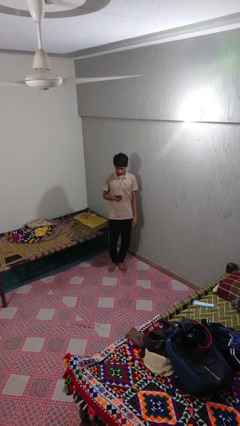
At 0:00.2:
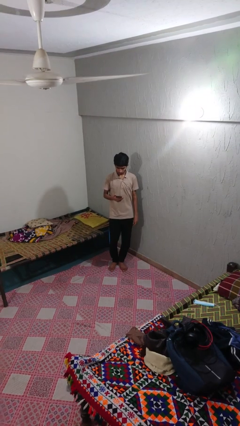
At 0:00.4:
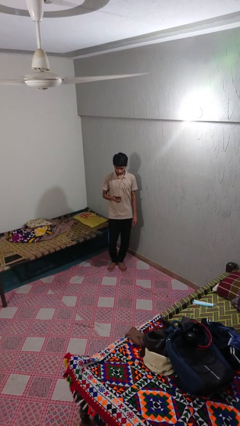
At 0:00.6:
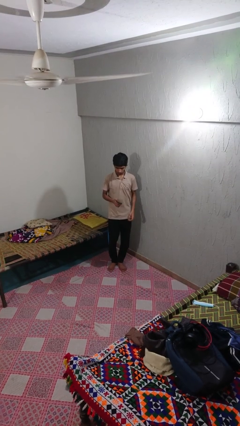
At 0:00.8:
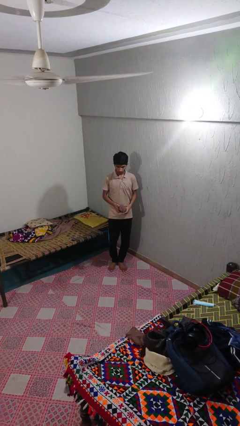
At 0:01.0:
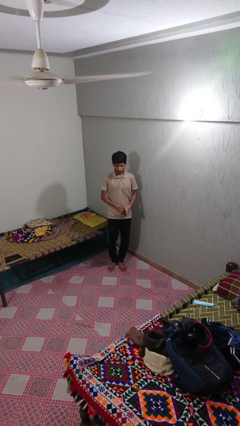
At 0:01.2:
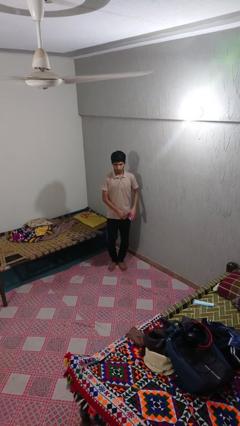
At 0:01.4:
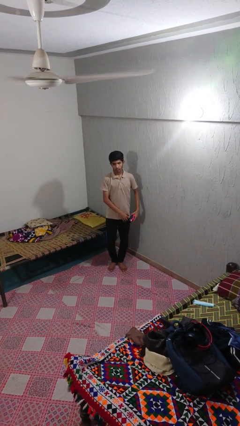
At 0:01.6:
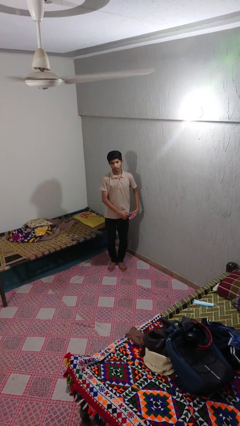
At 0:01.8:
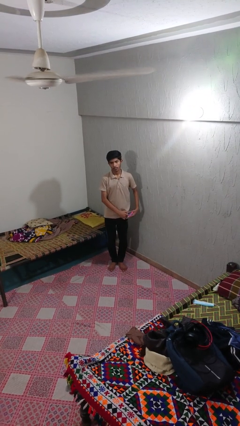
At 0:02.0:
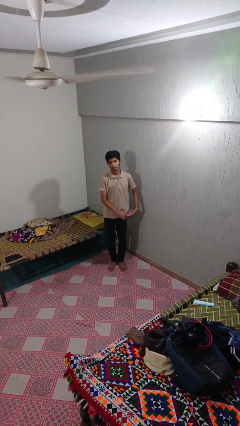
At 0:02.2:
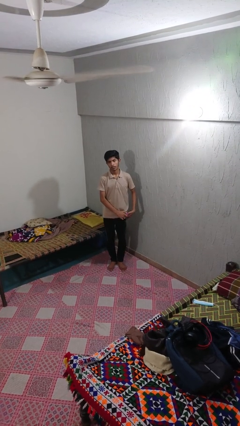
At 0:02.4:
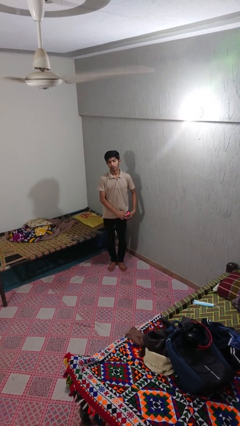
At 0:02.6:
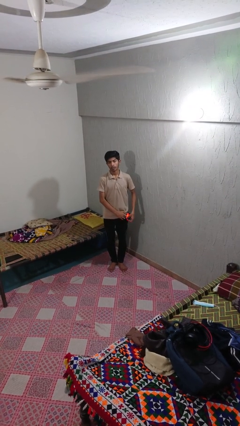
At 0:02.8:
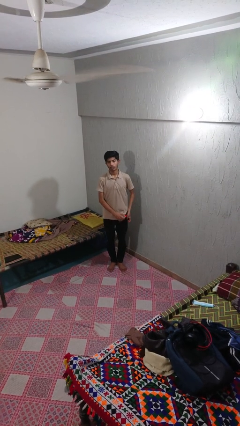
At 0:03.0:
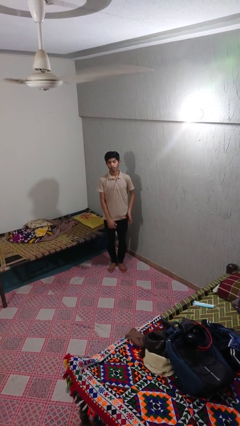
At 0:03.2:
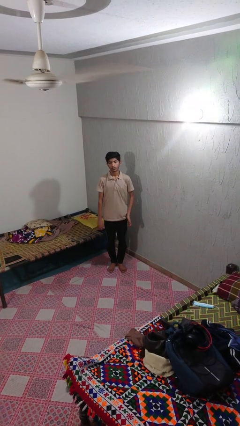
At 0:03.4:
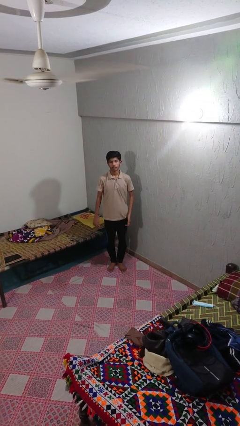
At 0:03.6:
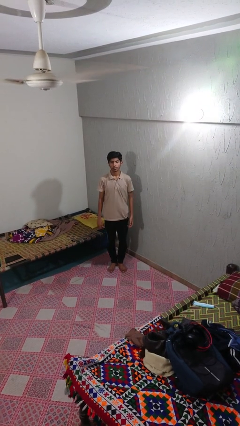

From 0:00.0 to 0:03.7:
person puts phone into pocket

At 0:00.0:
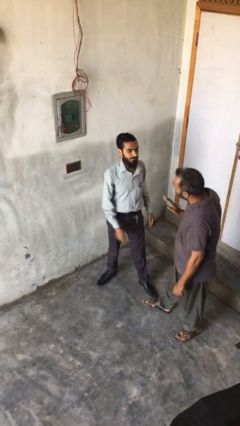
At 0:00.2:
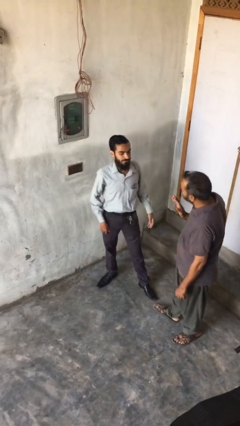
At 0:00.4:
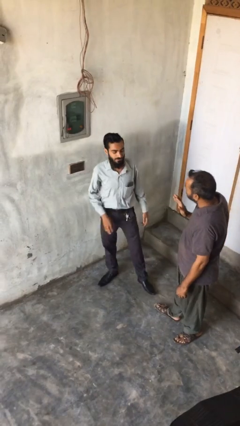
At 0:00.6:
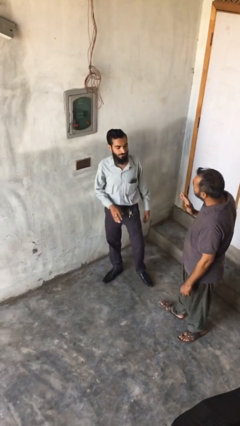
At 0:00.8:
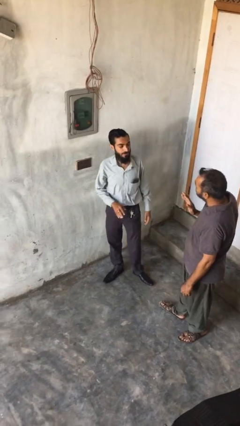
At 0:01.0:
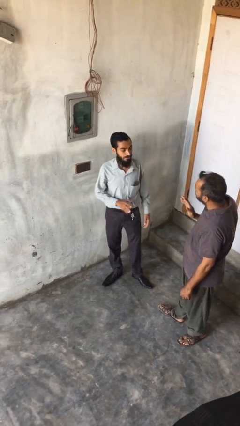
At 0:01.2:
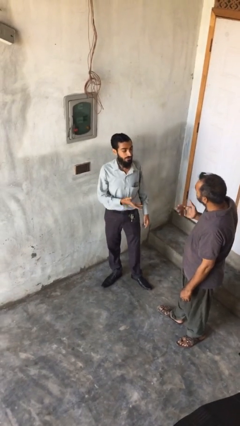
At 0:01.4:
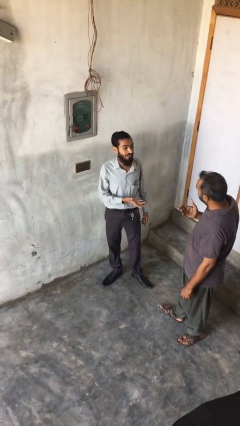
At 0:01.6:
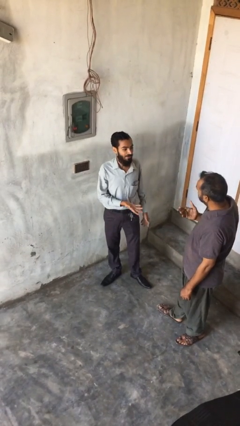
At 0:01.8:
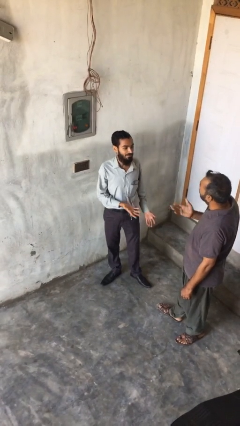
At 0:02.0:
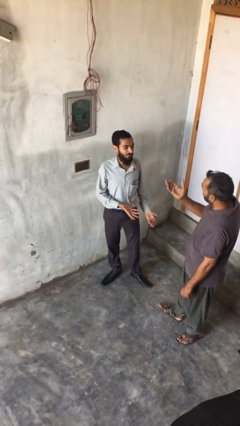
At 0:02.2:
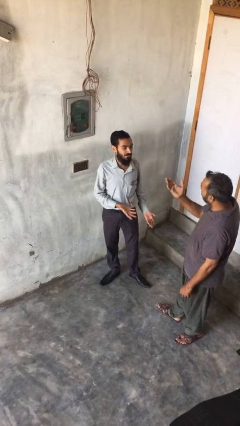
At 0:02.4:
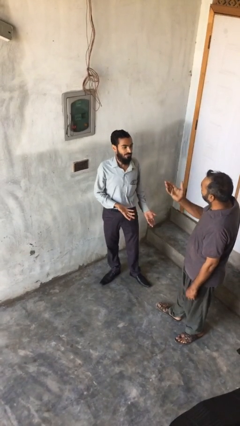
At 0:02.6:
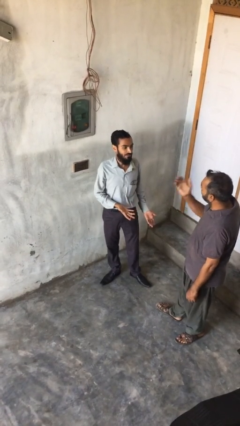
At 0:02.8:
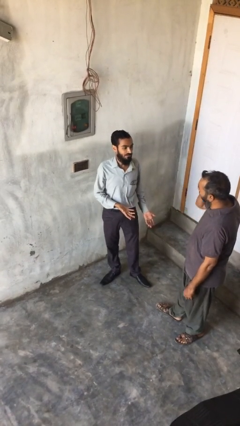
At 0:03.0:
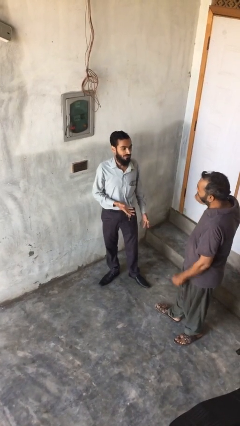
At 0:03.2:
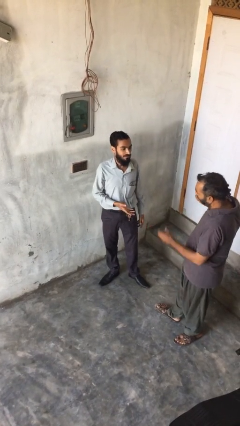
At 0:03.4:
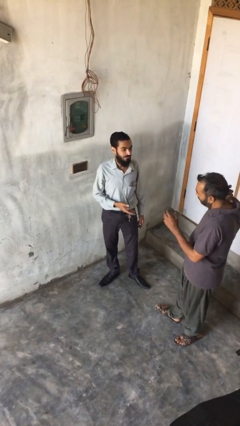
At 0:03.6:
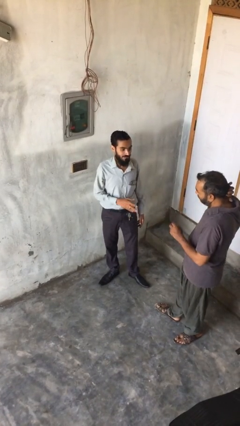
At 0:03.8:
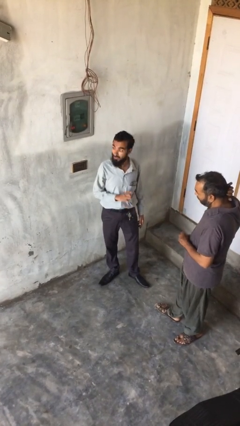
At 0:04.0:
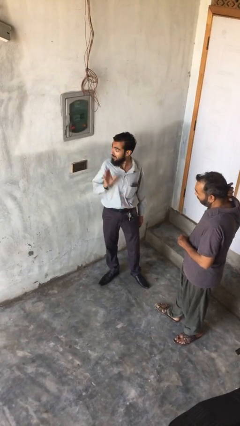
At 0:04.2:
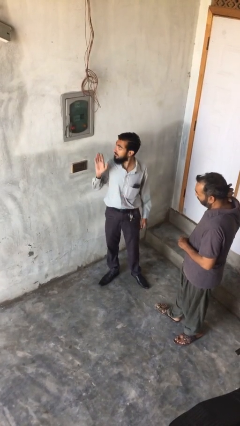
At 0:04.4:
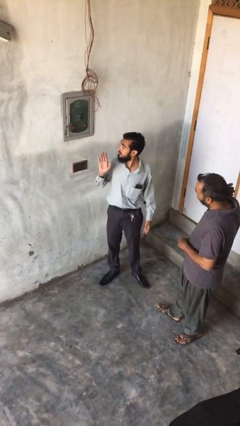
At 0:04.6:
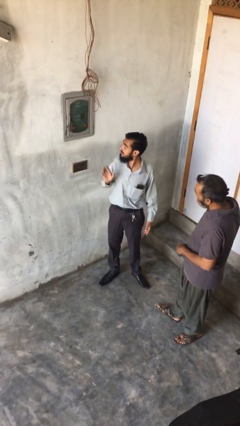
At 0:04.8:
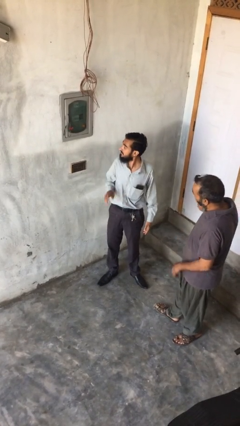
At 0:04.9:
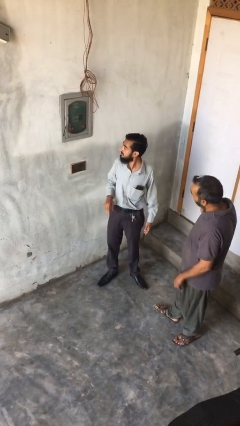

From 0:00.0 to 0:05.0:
person talks to person

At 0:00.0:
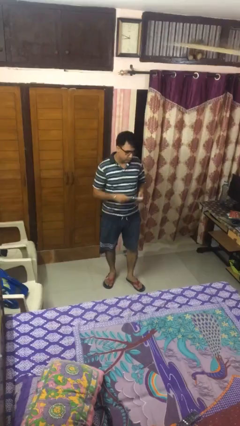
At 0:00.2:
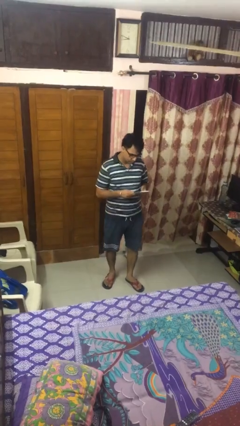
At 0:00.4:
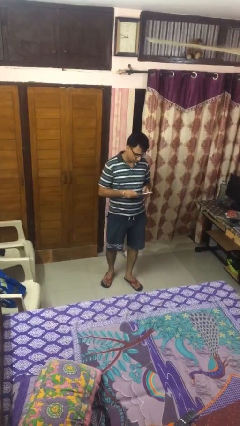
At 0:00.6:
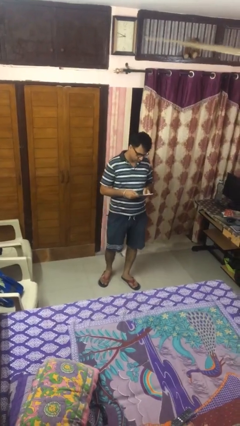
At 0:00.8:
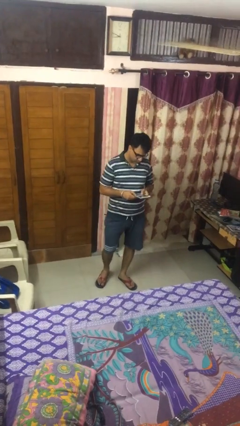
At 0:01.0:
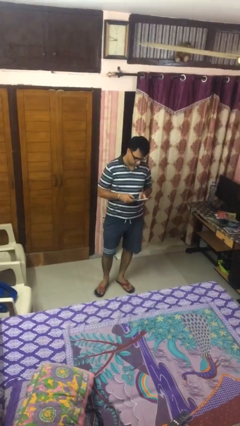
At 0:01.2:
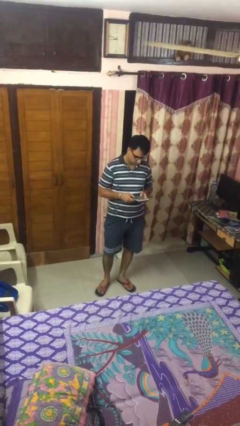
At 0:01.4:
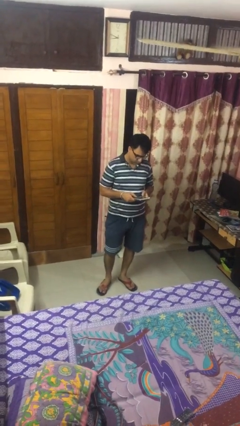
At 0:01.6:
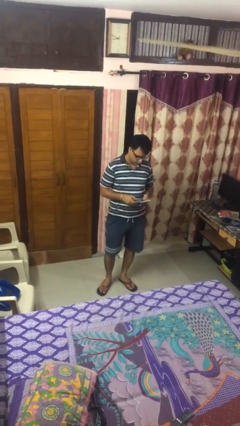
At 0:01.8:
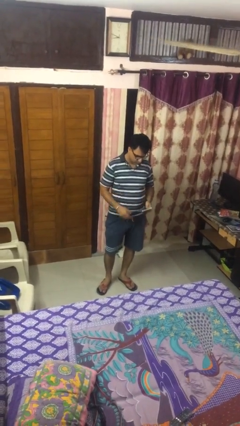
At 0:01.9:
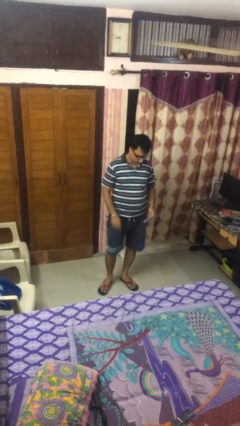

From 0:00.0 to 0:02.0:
person interacts with tablet

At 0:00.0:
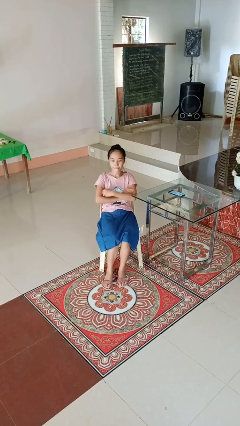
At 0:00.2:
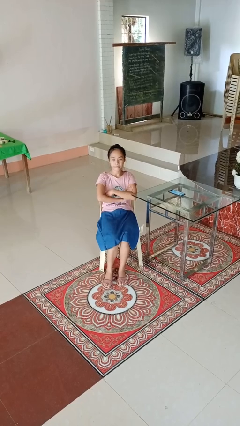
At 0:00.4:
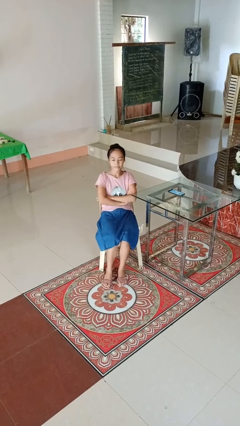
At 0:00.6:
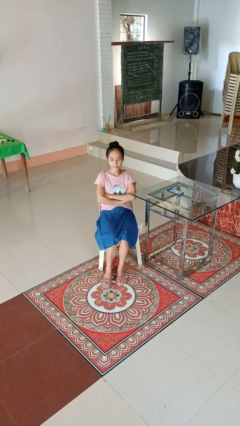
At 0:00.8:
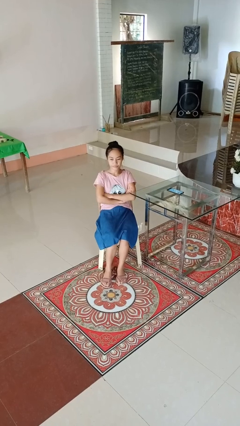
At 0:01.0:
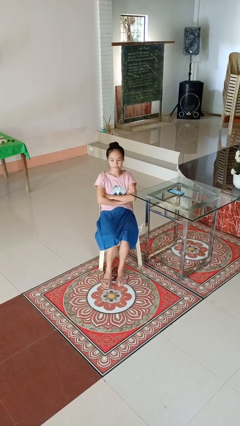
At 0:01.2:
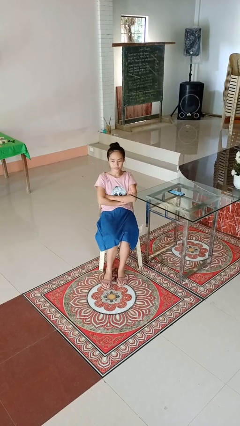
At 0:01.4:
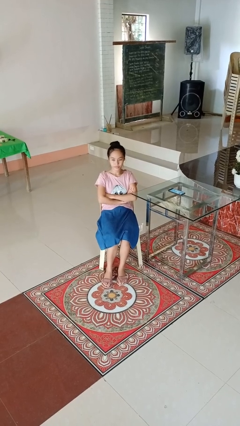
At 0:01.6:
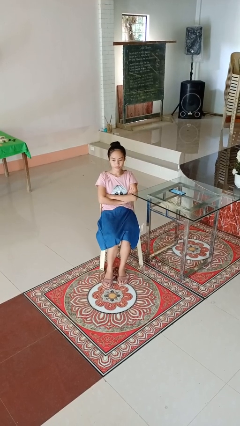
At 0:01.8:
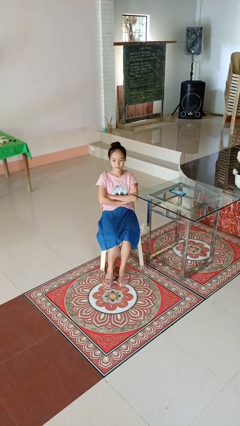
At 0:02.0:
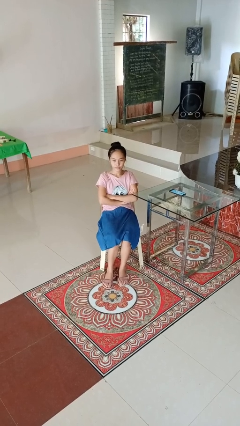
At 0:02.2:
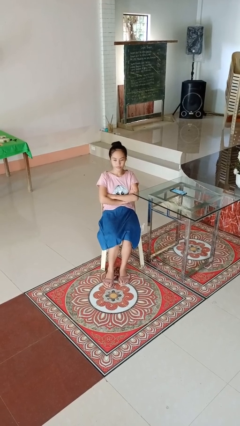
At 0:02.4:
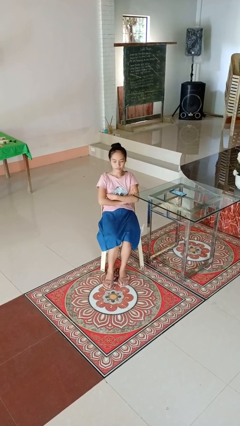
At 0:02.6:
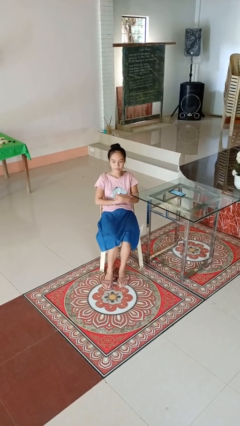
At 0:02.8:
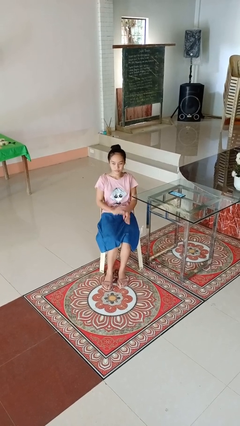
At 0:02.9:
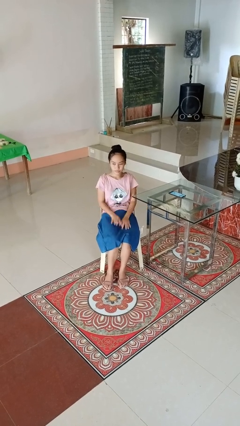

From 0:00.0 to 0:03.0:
person crosses arms

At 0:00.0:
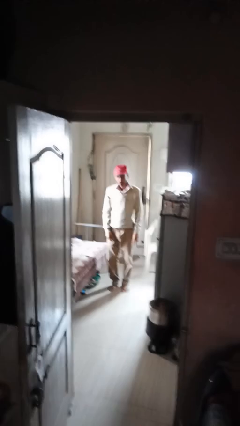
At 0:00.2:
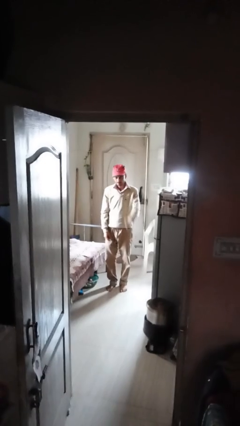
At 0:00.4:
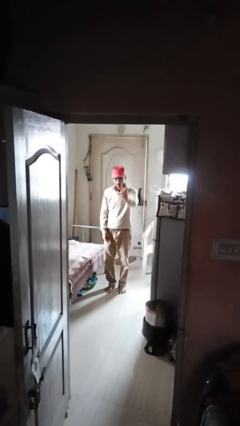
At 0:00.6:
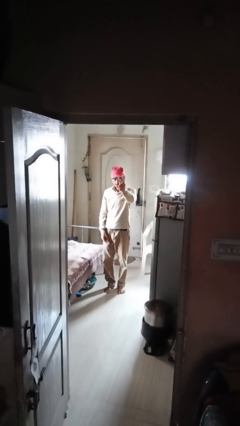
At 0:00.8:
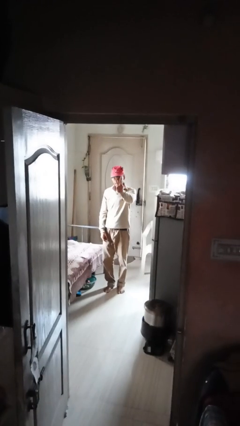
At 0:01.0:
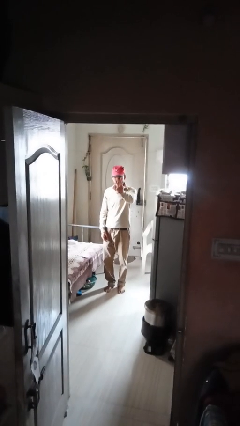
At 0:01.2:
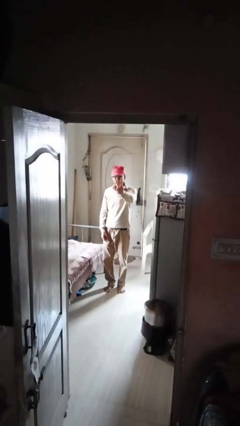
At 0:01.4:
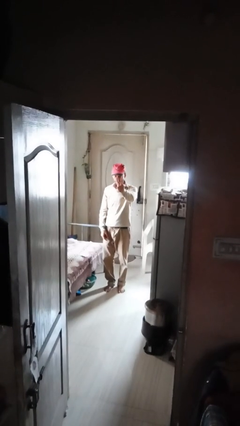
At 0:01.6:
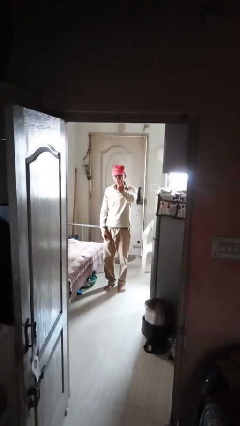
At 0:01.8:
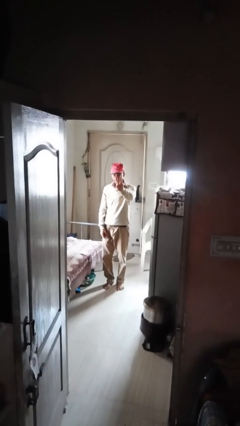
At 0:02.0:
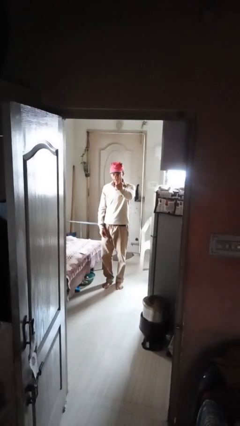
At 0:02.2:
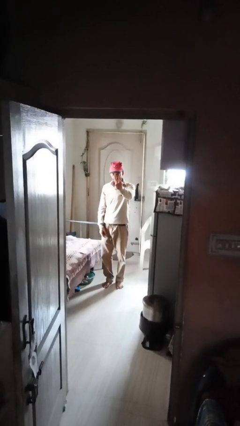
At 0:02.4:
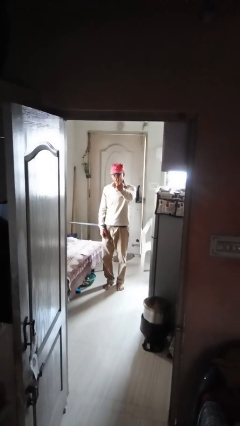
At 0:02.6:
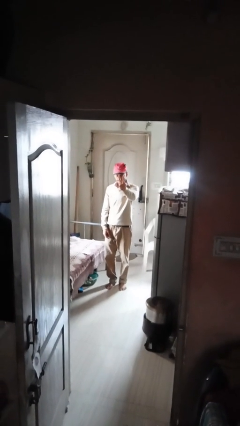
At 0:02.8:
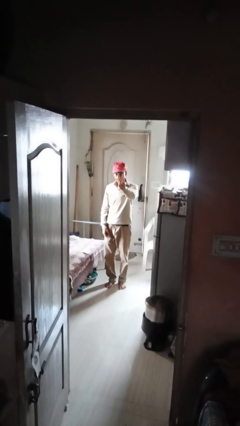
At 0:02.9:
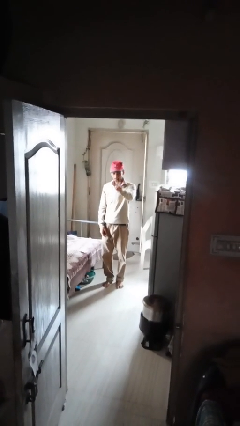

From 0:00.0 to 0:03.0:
person gestures peace
